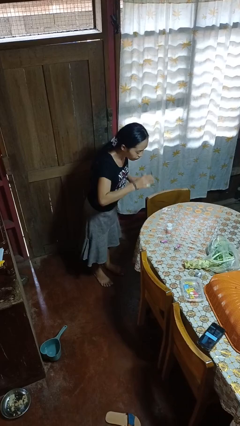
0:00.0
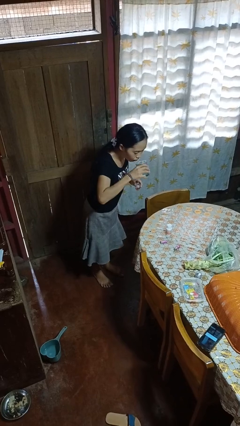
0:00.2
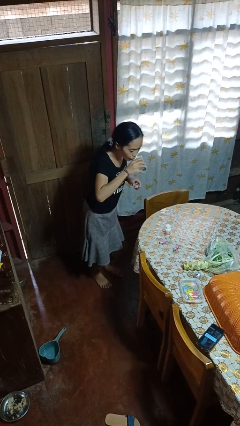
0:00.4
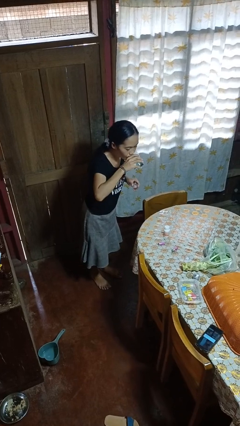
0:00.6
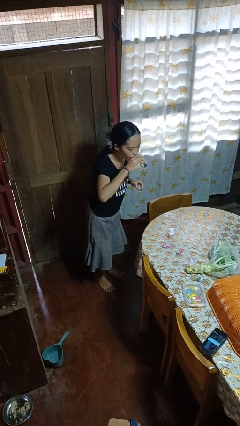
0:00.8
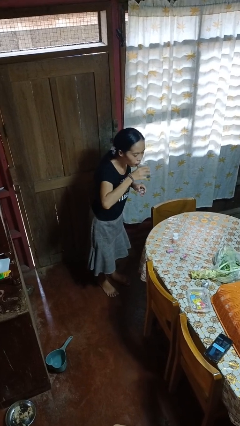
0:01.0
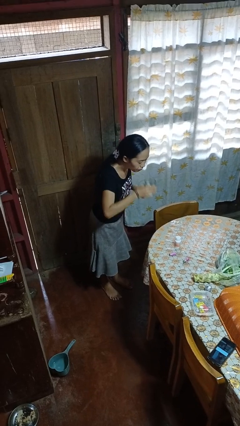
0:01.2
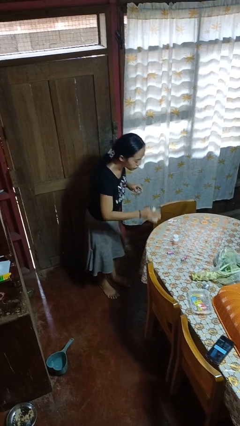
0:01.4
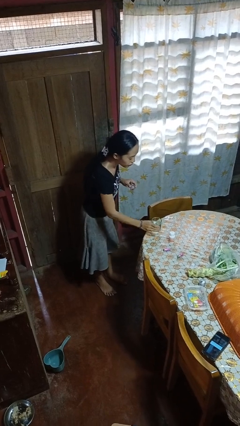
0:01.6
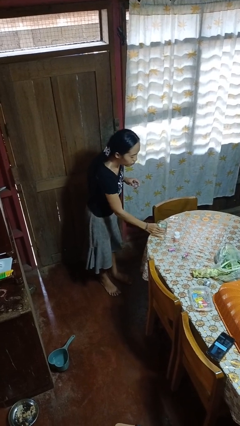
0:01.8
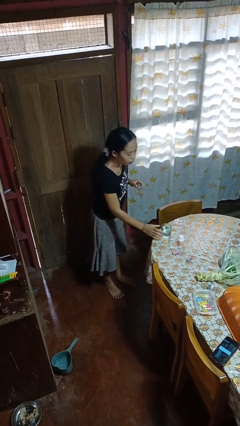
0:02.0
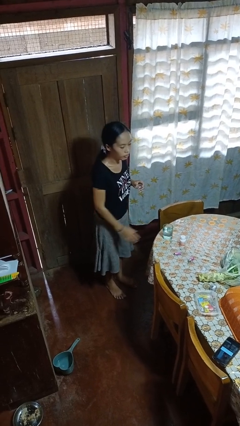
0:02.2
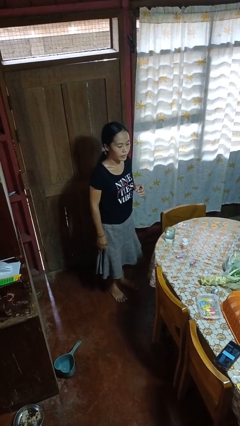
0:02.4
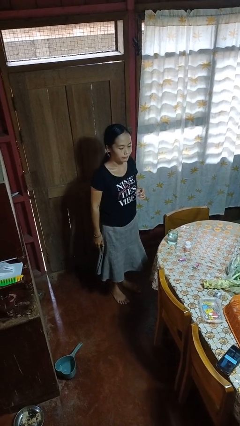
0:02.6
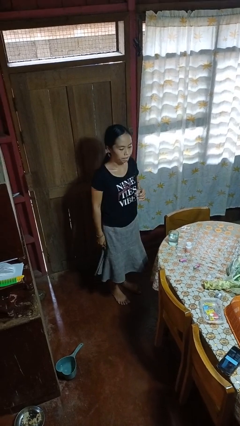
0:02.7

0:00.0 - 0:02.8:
person drinks from cup

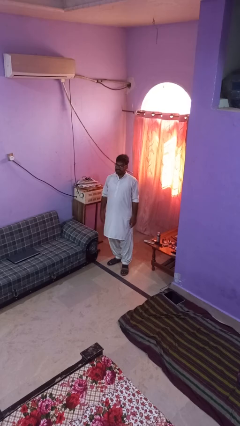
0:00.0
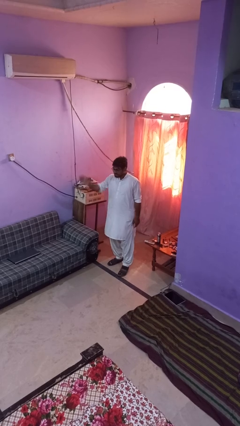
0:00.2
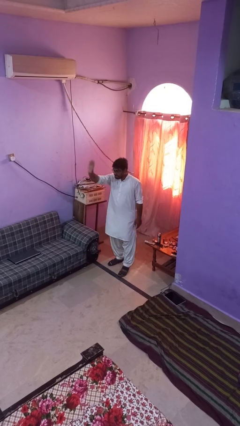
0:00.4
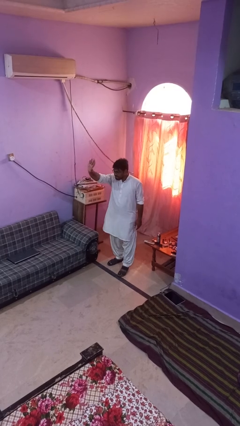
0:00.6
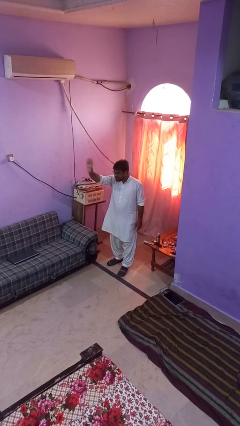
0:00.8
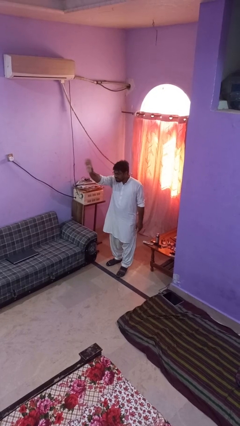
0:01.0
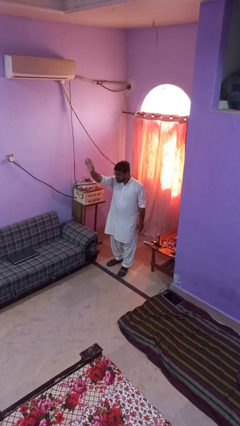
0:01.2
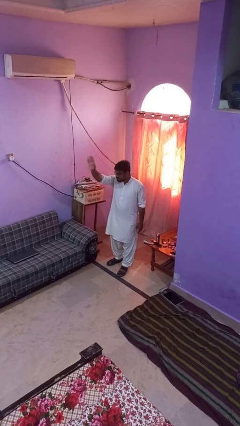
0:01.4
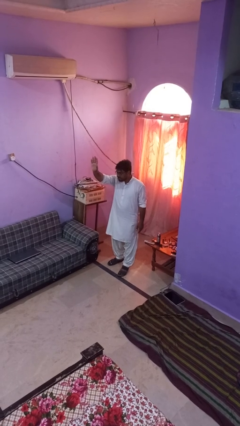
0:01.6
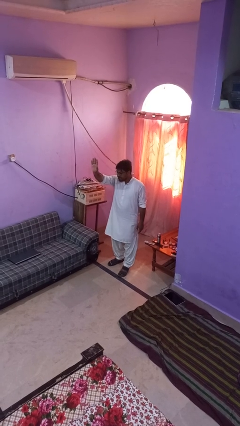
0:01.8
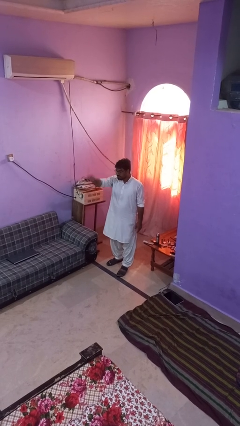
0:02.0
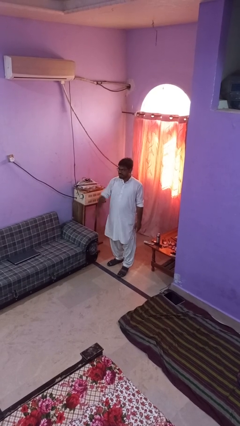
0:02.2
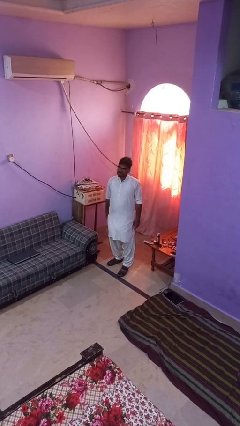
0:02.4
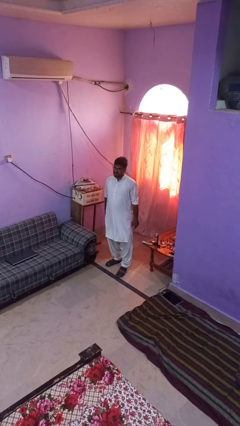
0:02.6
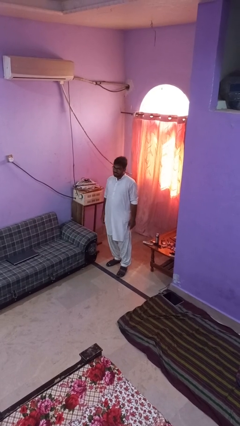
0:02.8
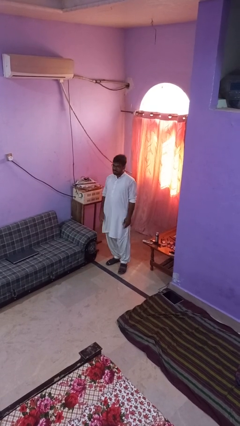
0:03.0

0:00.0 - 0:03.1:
person waves at person

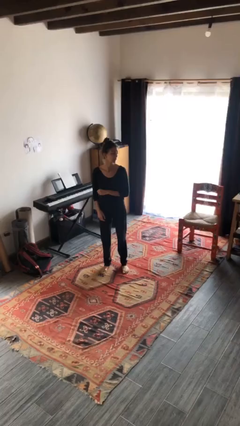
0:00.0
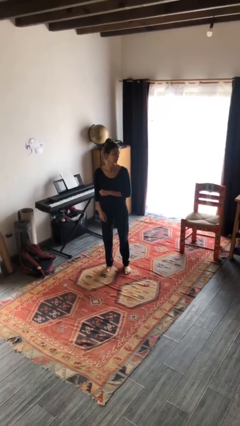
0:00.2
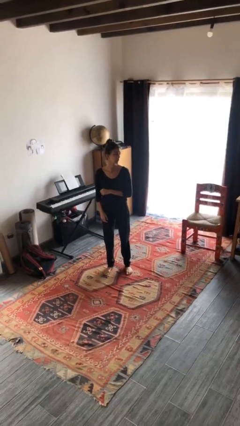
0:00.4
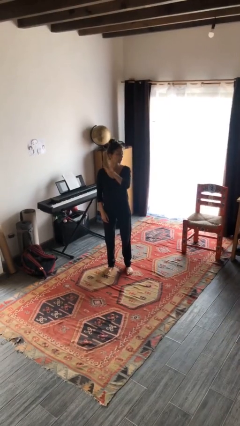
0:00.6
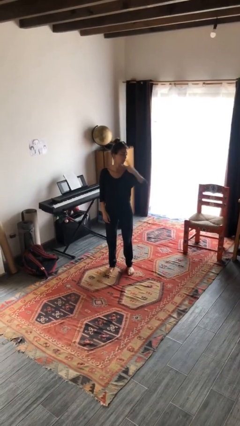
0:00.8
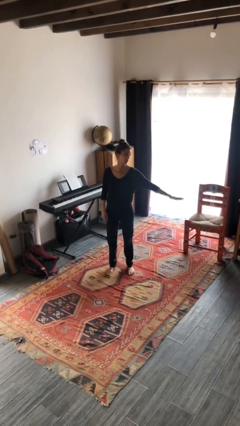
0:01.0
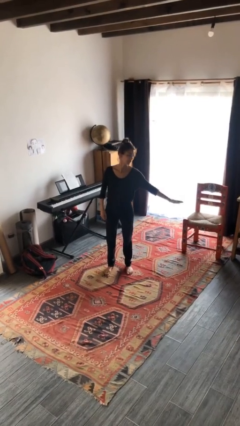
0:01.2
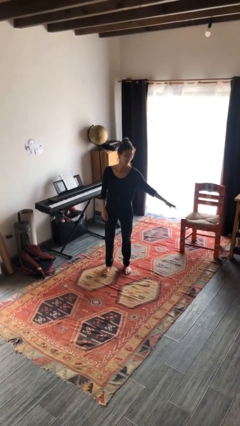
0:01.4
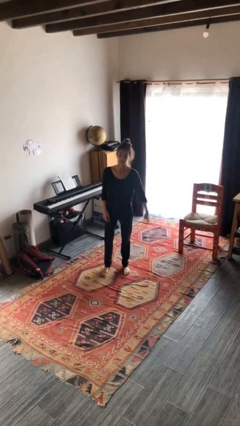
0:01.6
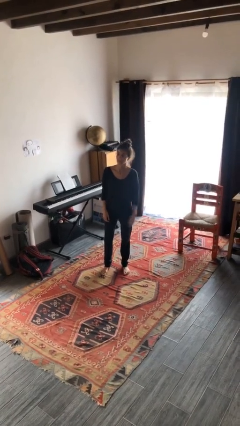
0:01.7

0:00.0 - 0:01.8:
person karate chop

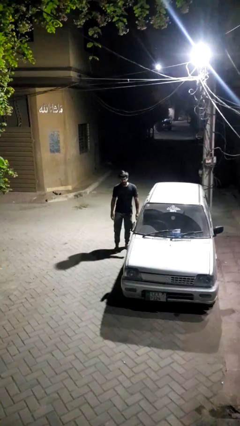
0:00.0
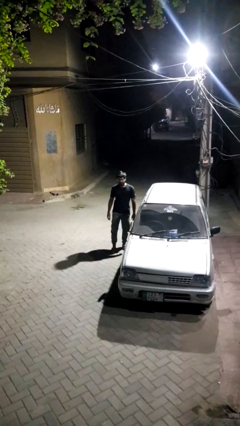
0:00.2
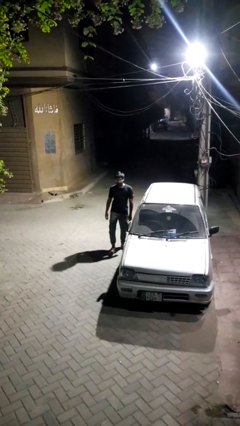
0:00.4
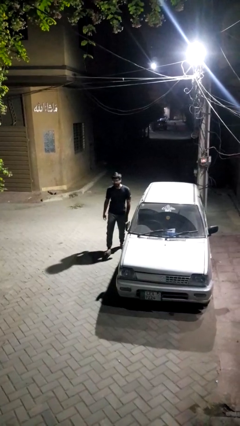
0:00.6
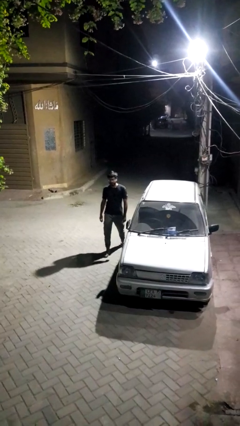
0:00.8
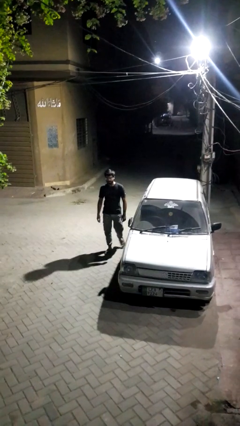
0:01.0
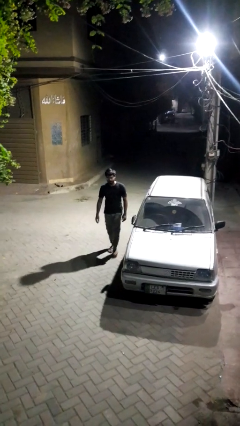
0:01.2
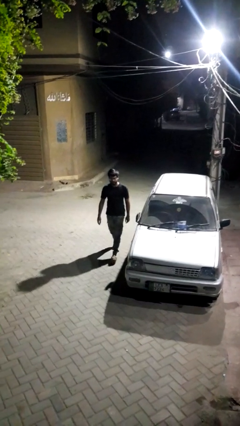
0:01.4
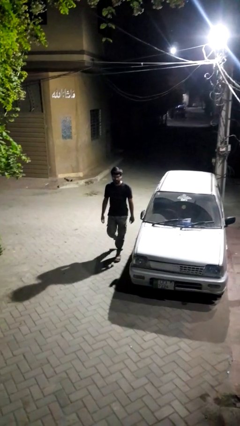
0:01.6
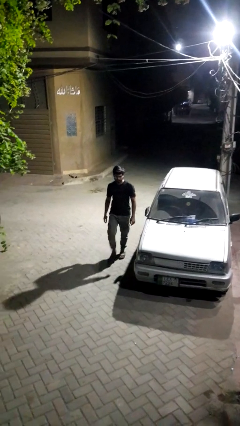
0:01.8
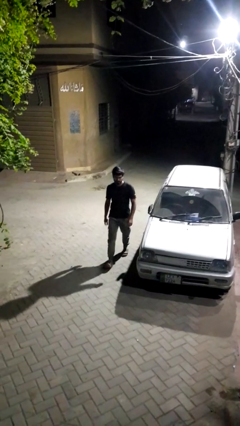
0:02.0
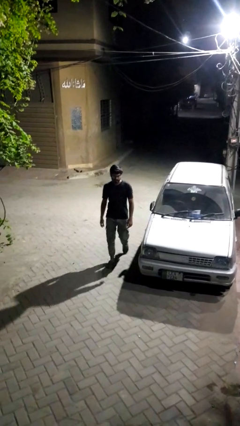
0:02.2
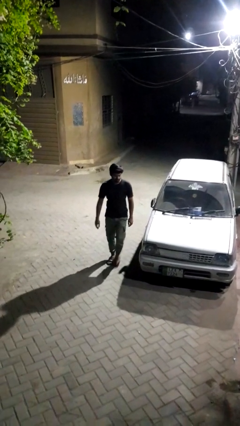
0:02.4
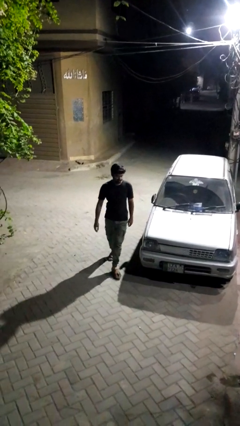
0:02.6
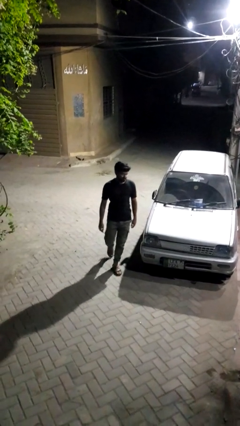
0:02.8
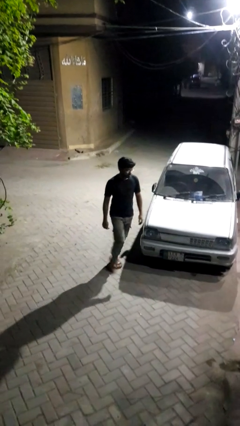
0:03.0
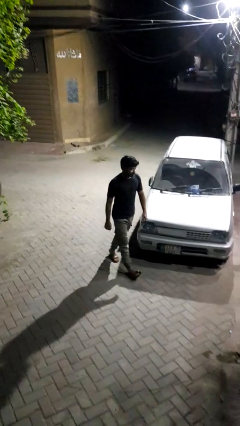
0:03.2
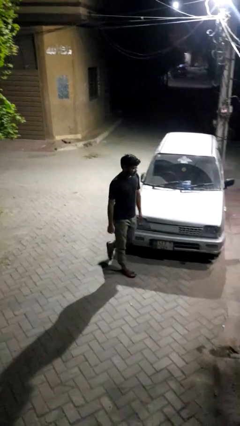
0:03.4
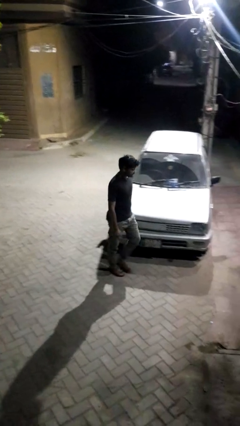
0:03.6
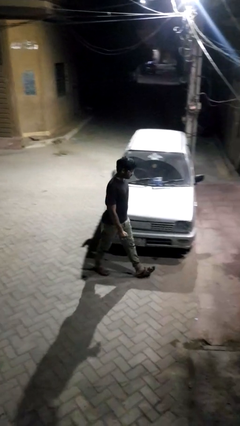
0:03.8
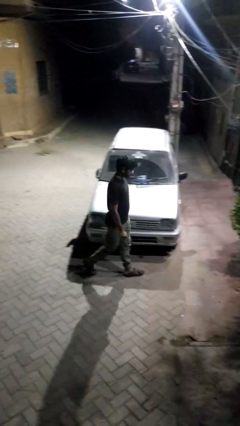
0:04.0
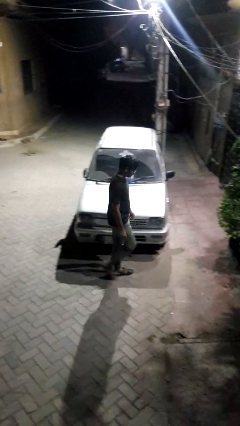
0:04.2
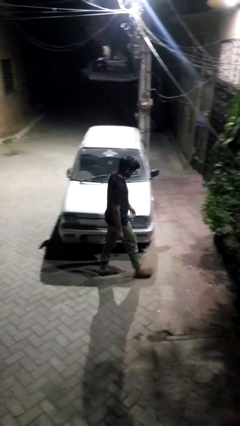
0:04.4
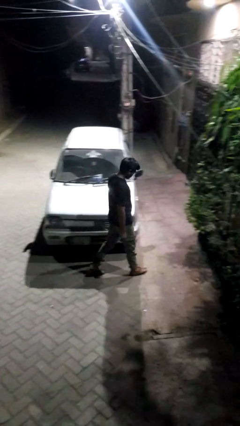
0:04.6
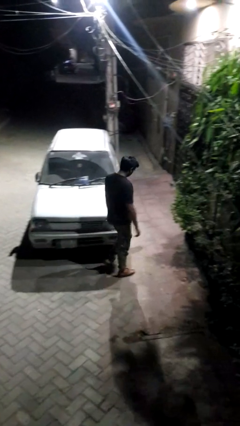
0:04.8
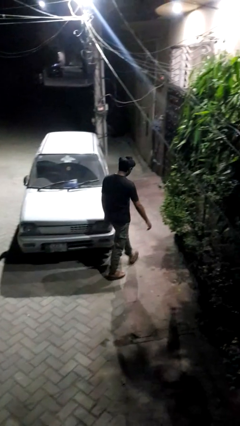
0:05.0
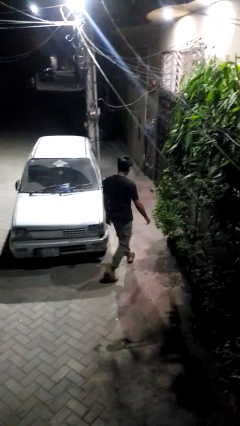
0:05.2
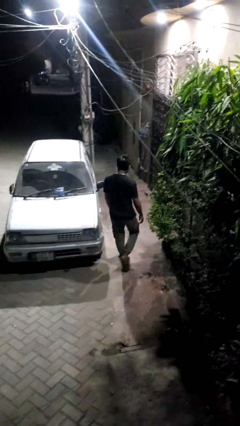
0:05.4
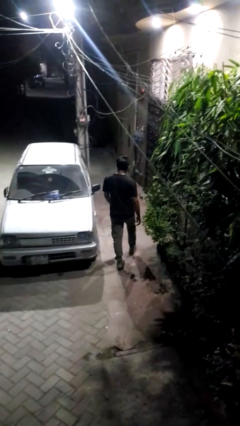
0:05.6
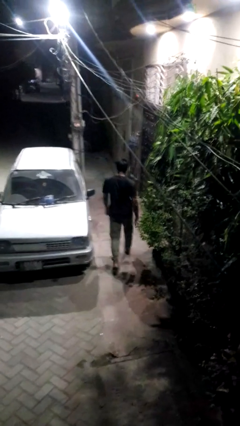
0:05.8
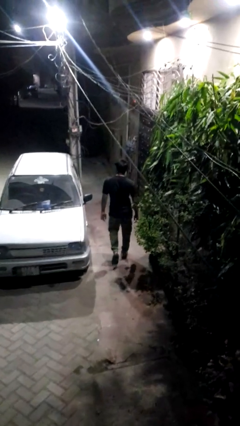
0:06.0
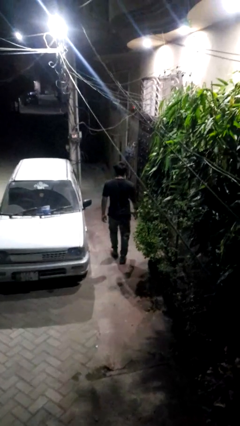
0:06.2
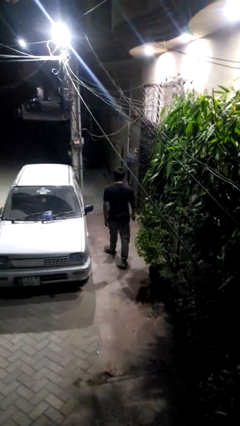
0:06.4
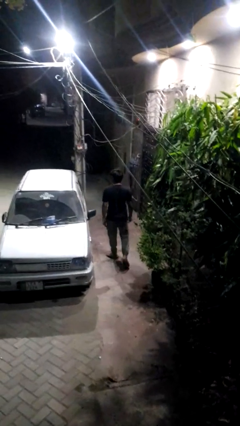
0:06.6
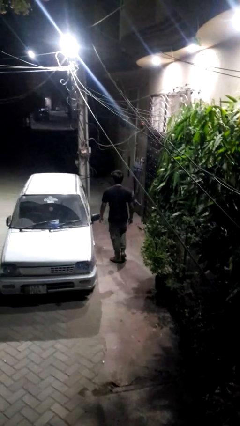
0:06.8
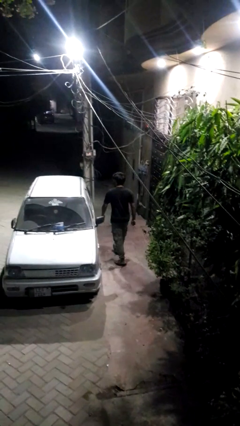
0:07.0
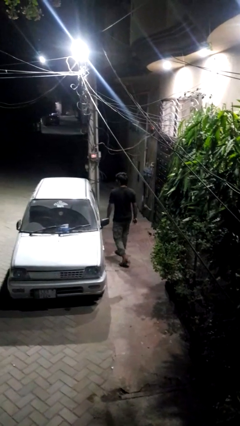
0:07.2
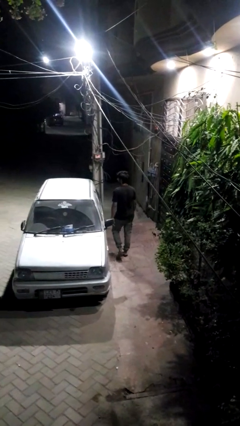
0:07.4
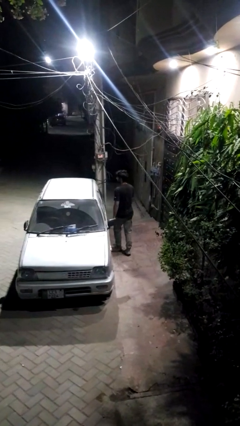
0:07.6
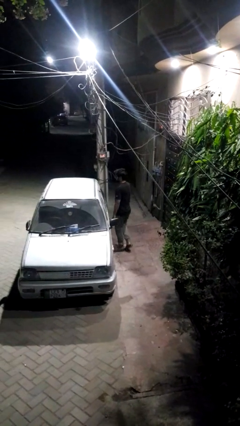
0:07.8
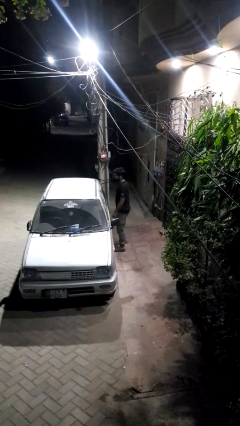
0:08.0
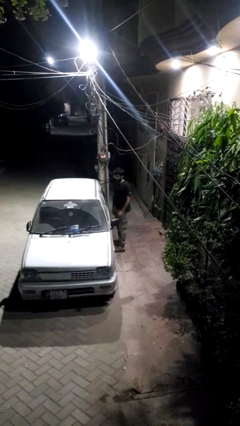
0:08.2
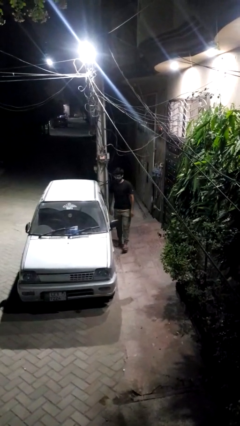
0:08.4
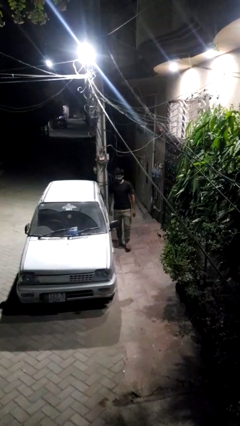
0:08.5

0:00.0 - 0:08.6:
person walks around car

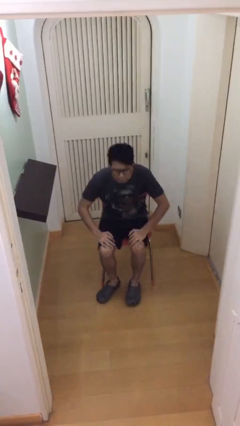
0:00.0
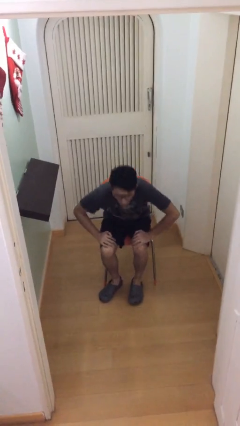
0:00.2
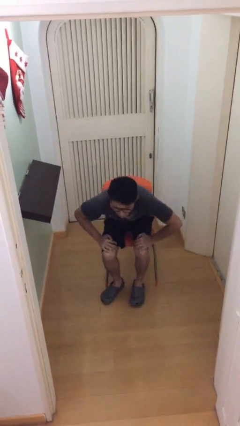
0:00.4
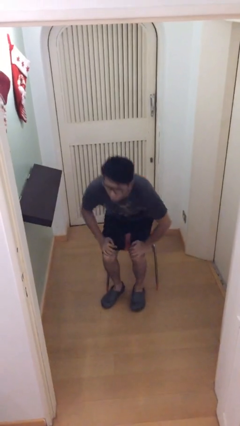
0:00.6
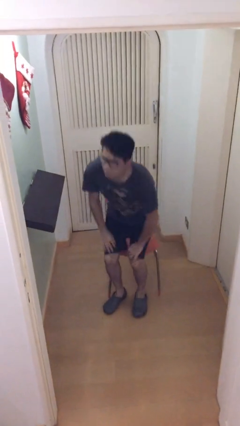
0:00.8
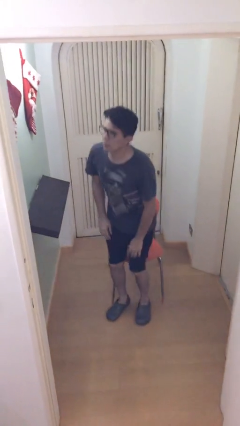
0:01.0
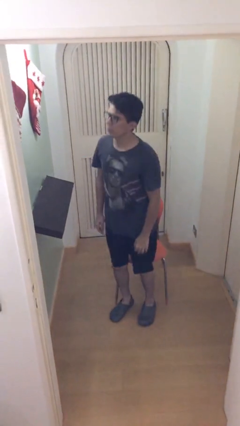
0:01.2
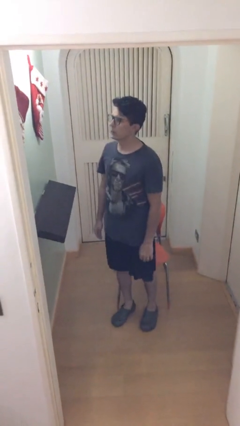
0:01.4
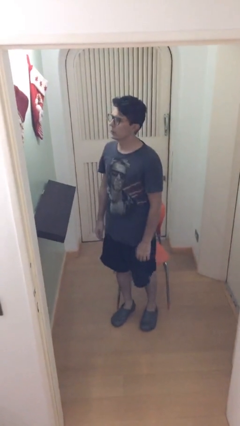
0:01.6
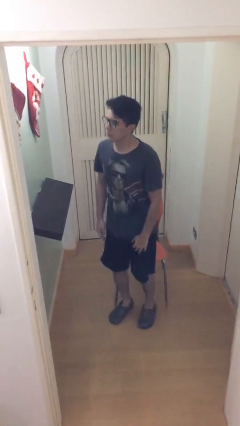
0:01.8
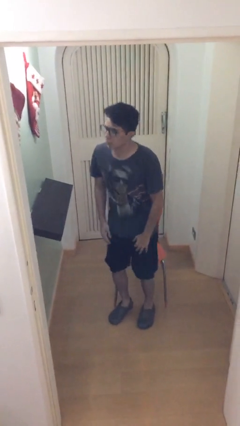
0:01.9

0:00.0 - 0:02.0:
person stands up
